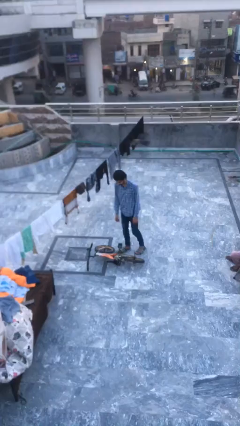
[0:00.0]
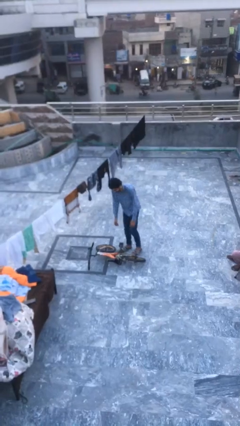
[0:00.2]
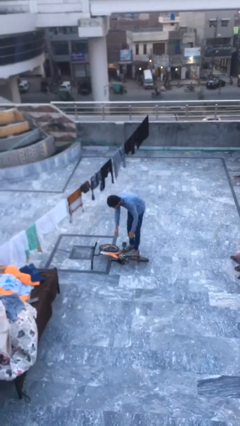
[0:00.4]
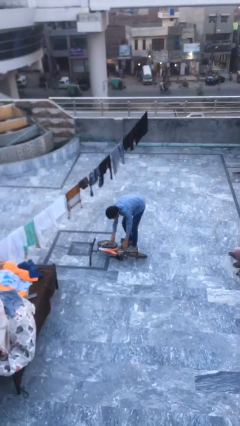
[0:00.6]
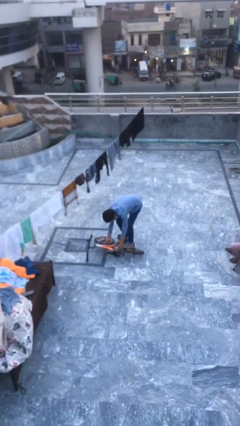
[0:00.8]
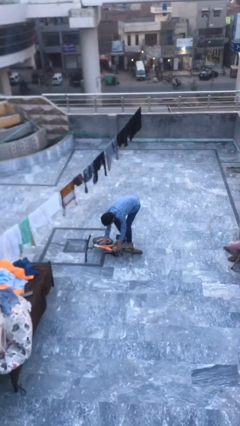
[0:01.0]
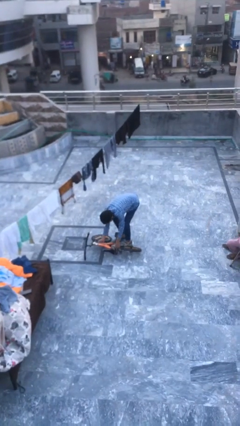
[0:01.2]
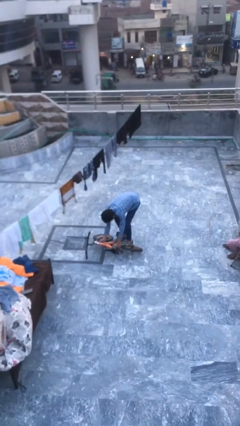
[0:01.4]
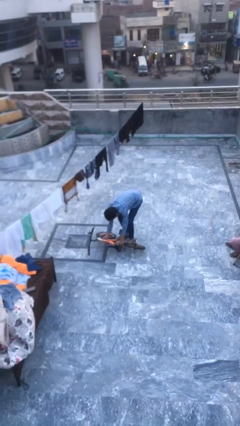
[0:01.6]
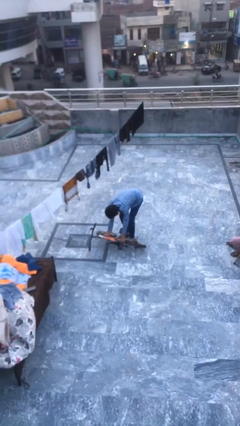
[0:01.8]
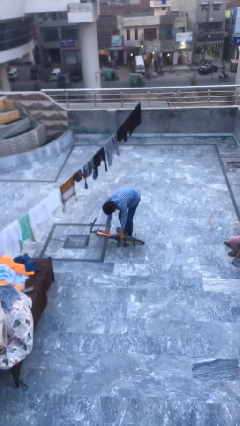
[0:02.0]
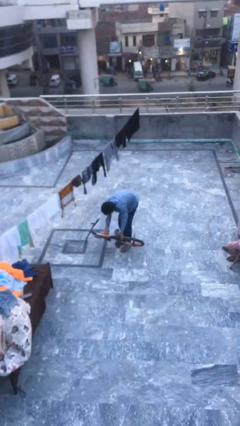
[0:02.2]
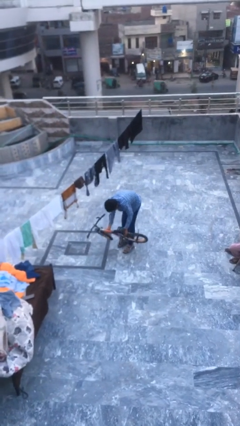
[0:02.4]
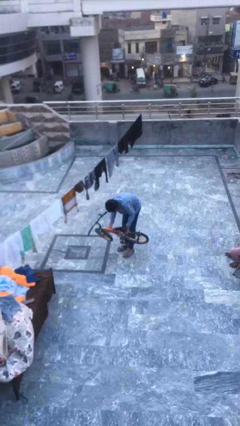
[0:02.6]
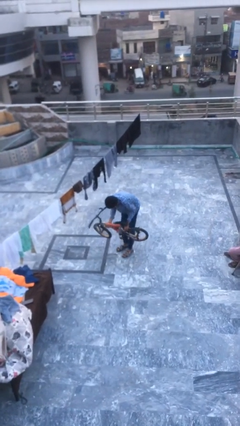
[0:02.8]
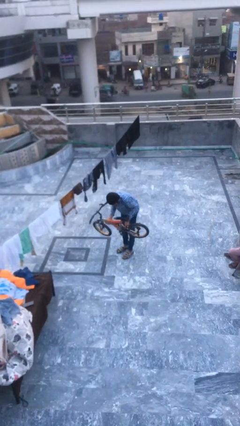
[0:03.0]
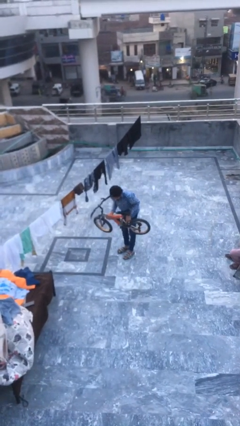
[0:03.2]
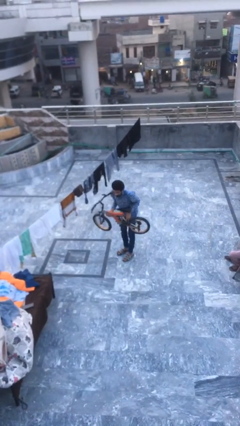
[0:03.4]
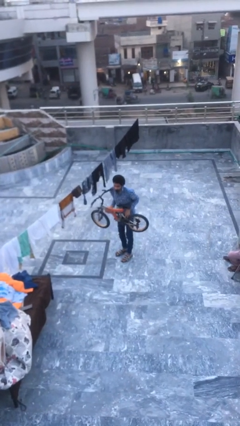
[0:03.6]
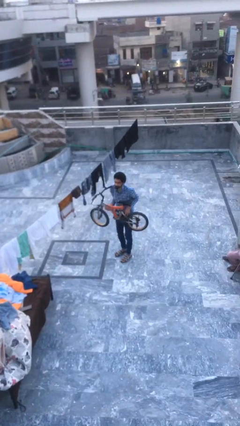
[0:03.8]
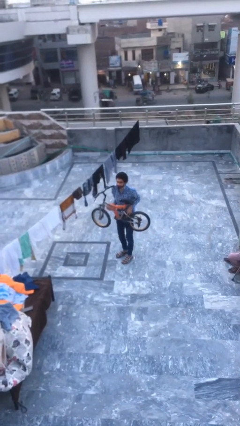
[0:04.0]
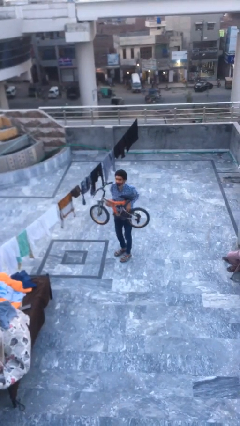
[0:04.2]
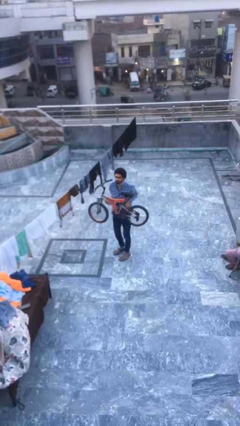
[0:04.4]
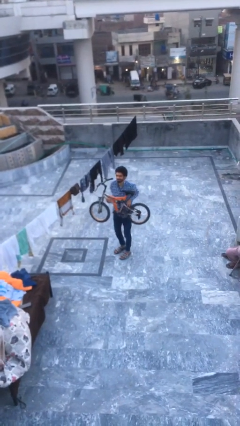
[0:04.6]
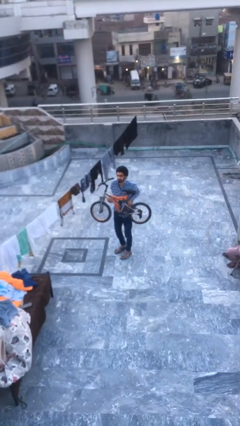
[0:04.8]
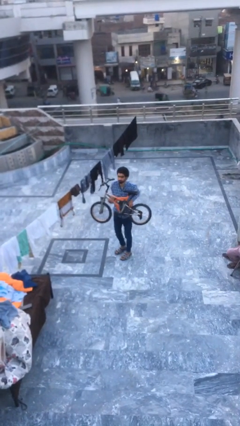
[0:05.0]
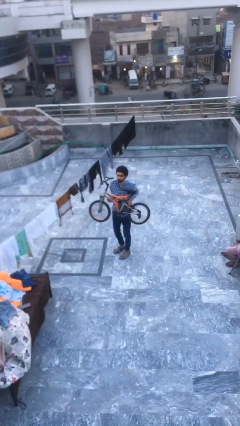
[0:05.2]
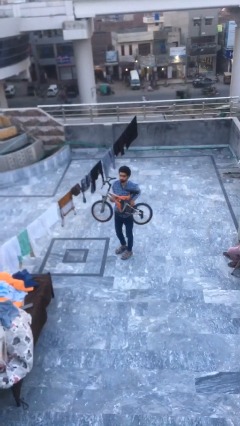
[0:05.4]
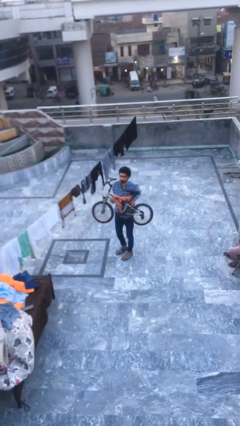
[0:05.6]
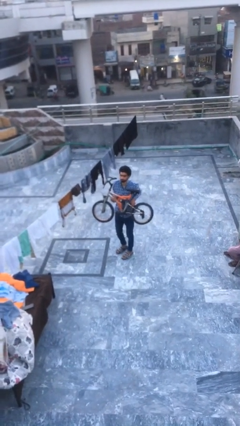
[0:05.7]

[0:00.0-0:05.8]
person picks up object from floor

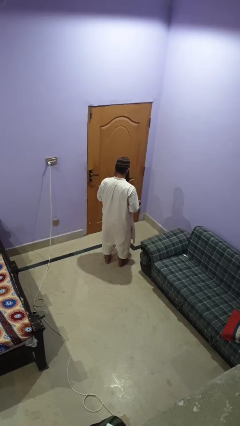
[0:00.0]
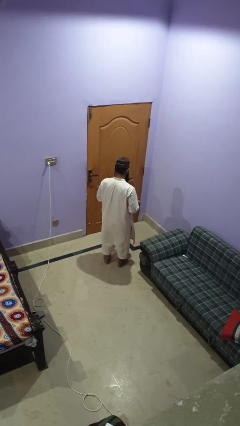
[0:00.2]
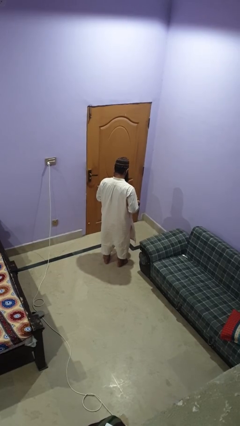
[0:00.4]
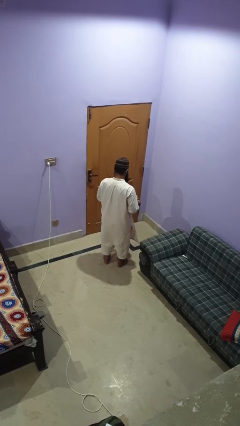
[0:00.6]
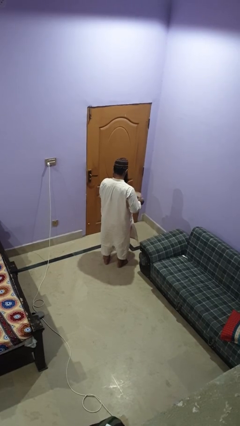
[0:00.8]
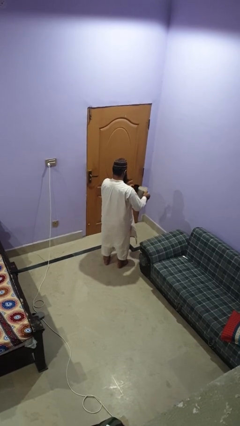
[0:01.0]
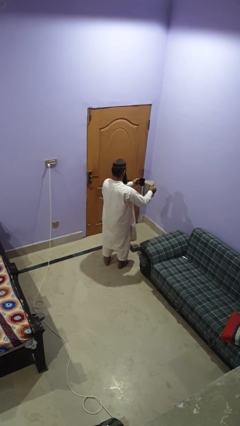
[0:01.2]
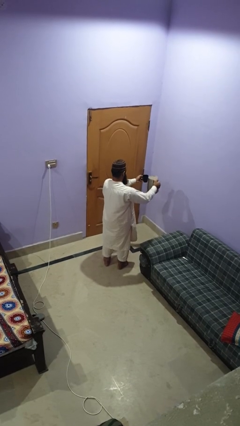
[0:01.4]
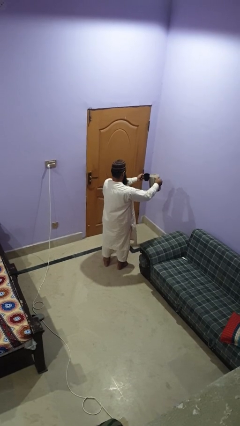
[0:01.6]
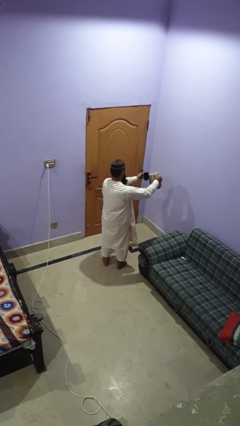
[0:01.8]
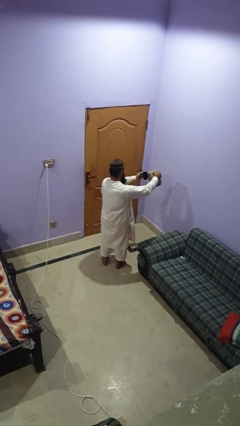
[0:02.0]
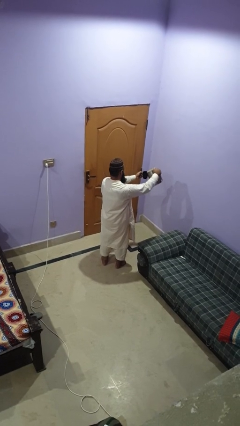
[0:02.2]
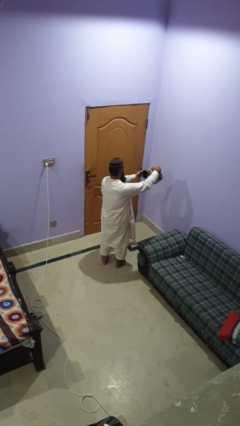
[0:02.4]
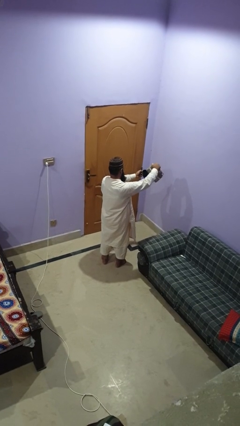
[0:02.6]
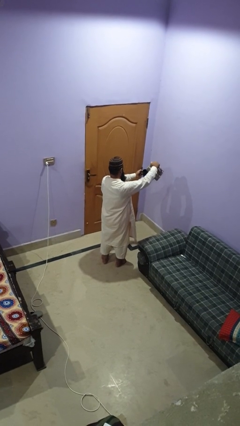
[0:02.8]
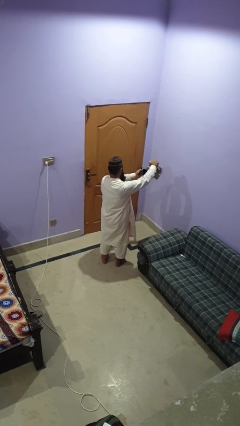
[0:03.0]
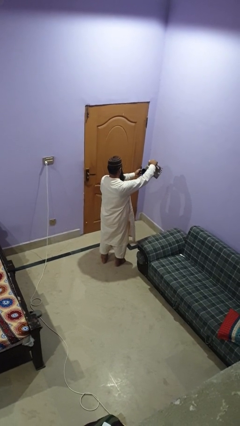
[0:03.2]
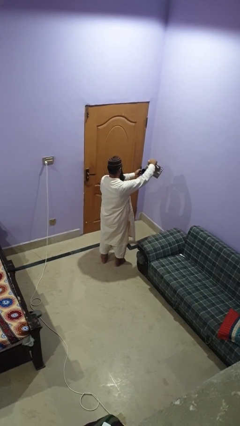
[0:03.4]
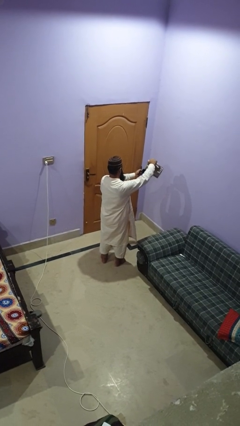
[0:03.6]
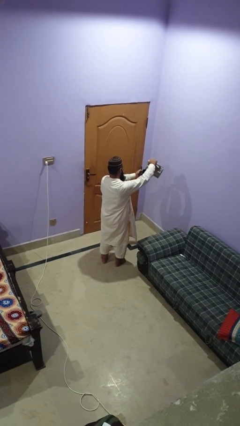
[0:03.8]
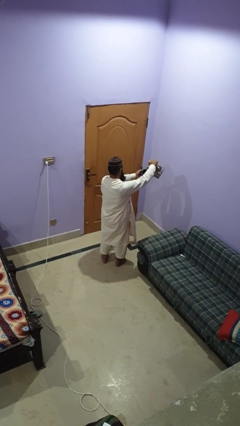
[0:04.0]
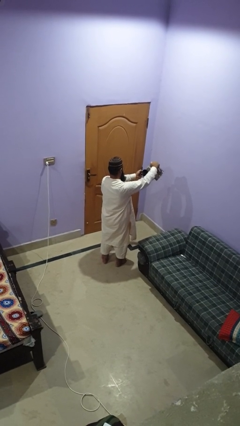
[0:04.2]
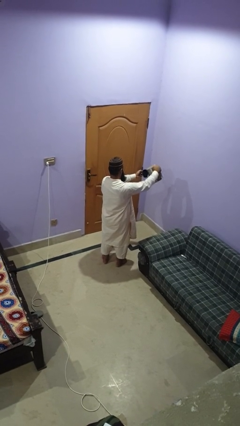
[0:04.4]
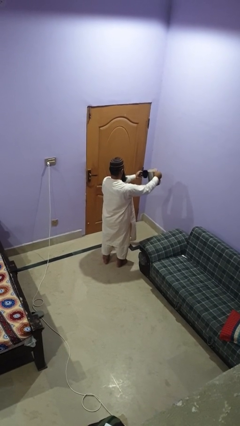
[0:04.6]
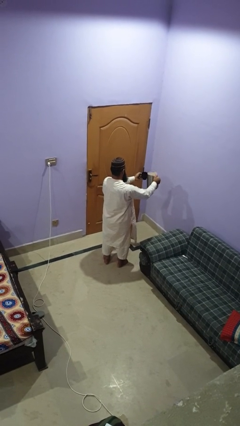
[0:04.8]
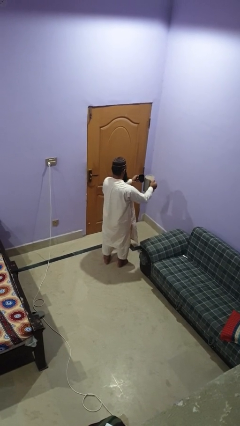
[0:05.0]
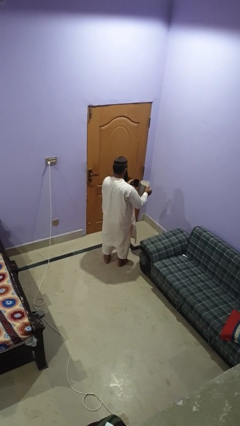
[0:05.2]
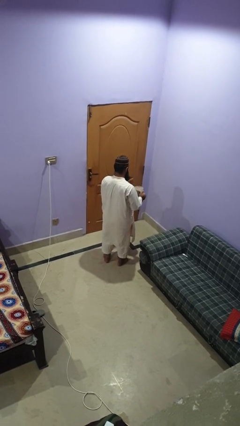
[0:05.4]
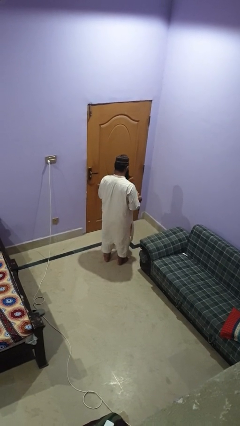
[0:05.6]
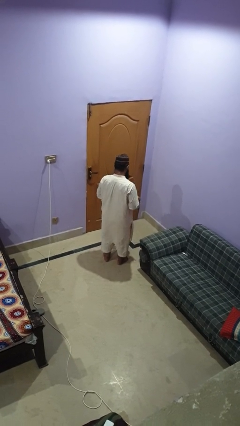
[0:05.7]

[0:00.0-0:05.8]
person pours coffee into mug

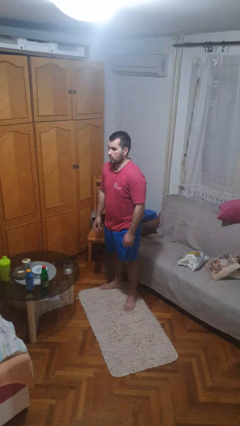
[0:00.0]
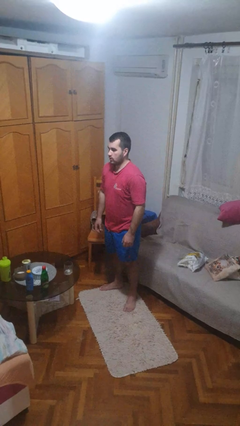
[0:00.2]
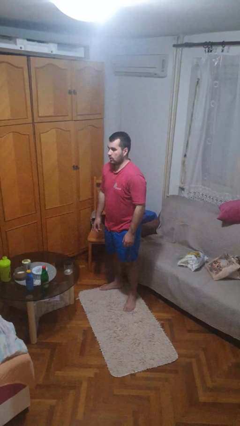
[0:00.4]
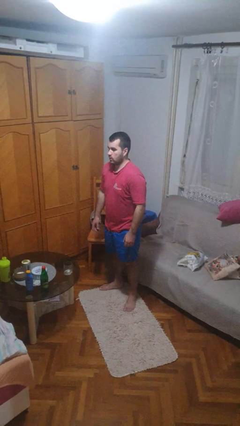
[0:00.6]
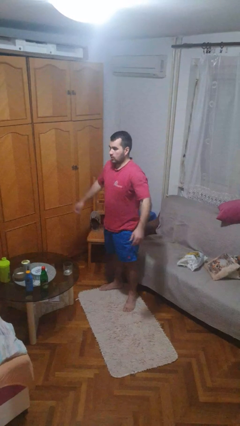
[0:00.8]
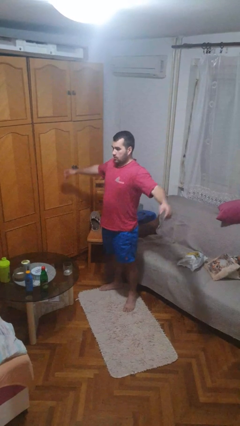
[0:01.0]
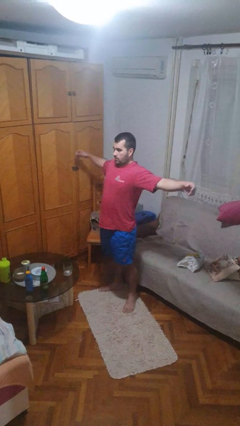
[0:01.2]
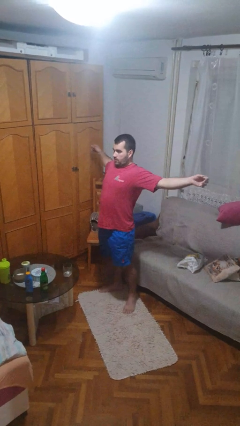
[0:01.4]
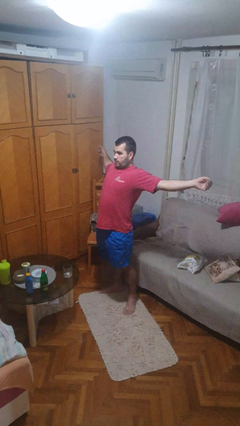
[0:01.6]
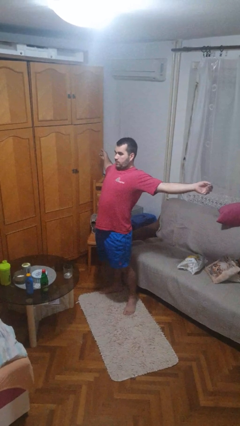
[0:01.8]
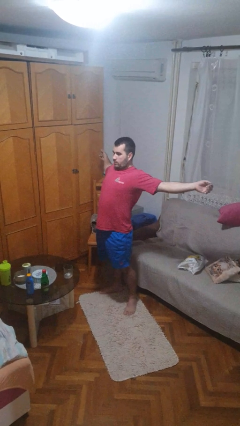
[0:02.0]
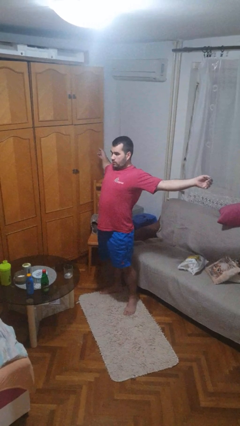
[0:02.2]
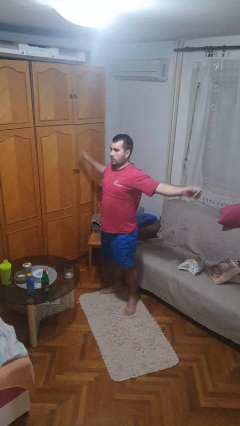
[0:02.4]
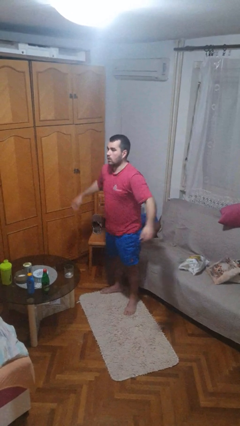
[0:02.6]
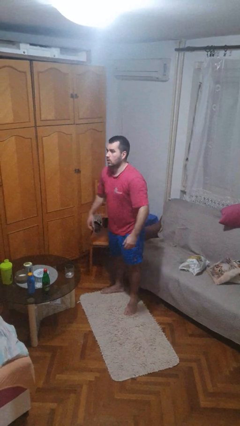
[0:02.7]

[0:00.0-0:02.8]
person stretches arms to side

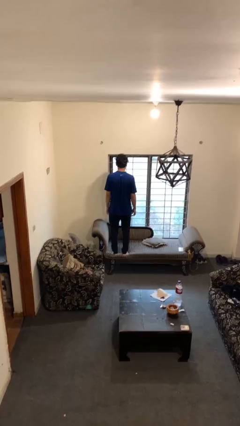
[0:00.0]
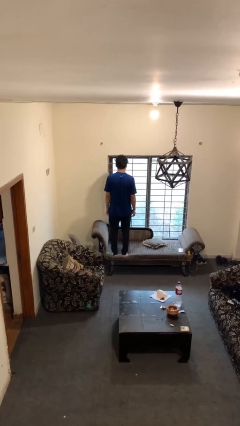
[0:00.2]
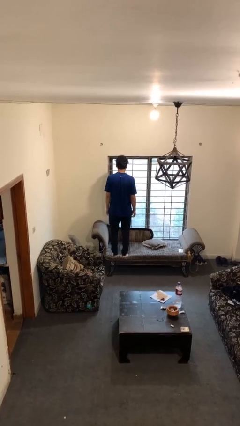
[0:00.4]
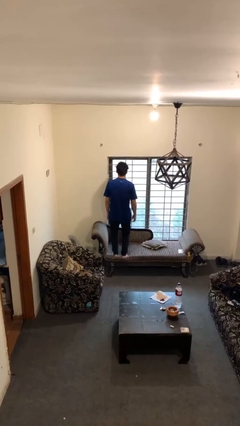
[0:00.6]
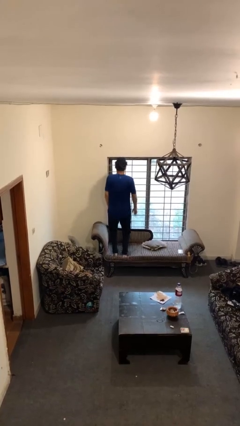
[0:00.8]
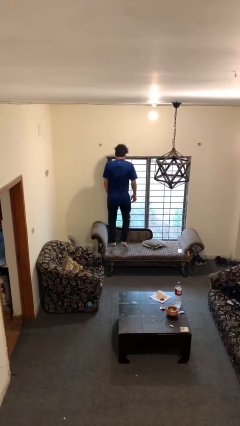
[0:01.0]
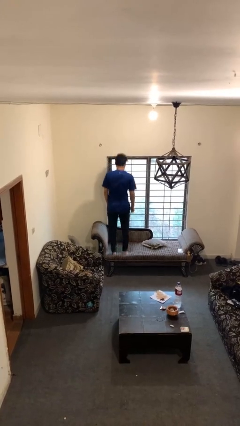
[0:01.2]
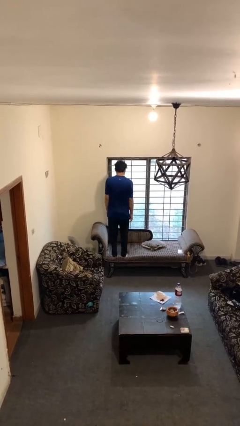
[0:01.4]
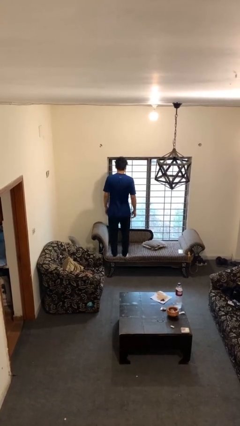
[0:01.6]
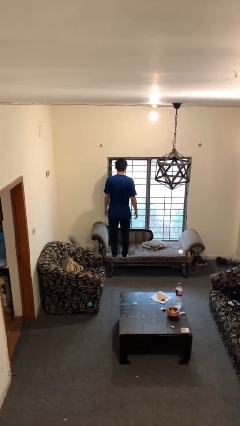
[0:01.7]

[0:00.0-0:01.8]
person jumps on couch

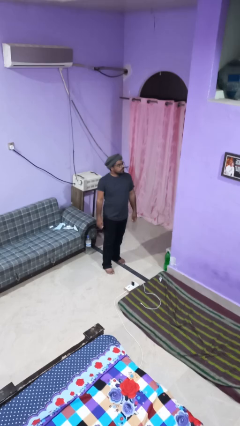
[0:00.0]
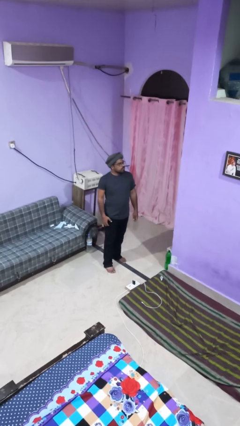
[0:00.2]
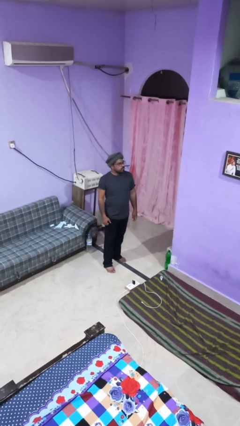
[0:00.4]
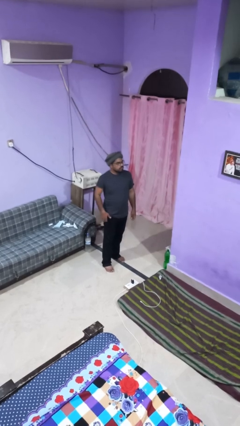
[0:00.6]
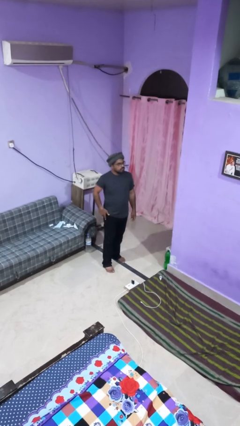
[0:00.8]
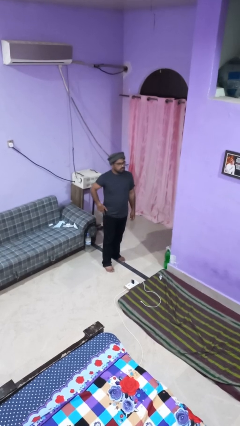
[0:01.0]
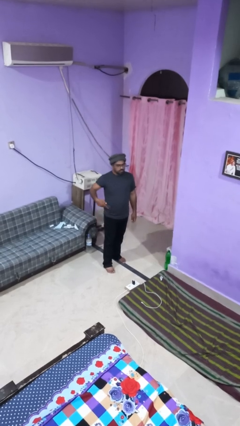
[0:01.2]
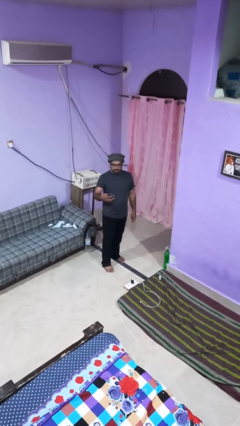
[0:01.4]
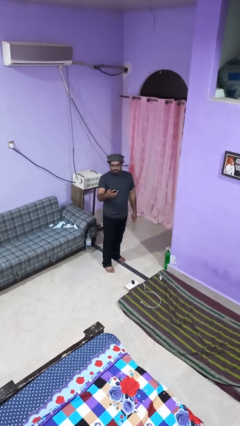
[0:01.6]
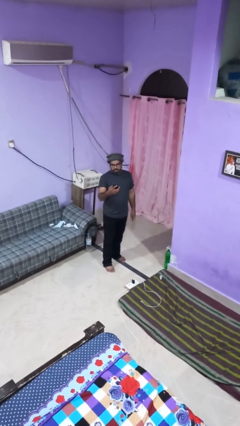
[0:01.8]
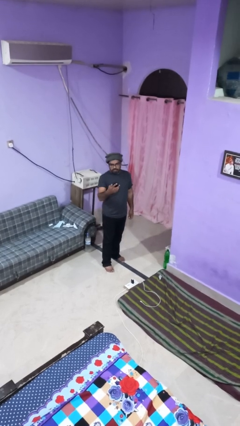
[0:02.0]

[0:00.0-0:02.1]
person takes phone from pocket
